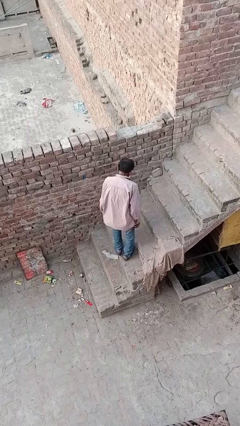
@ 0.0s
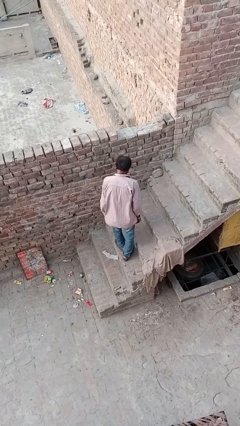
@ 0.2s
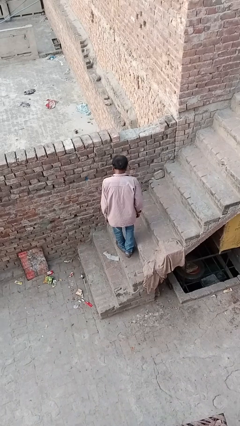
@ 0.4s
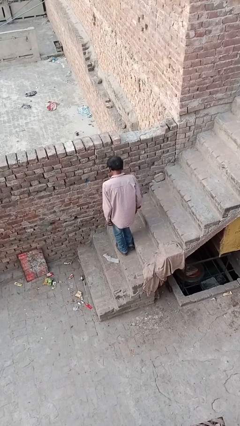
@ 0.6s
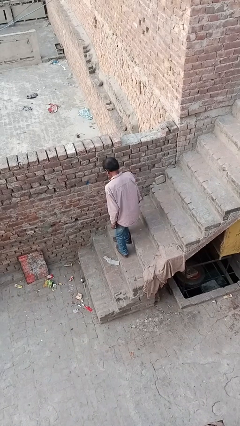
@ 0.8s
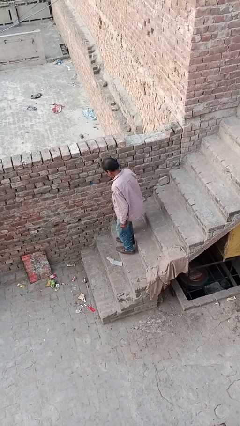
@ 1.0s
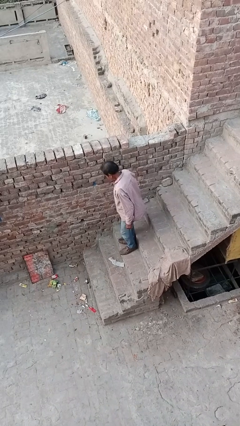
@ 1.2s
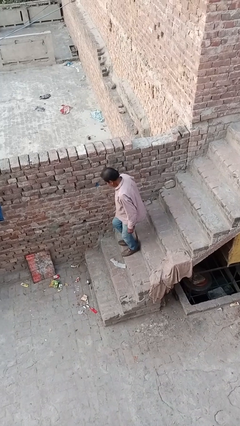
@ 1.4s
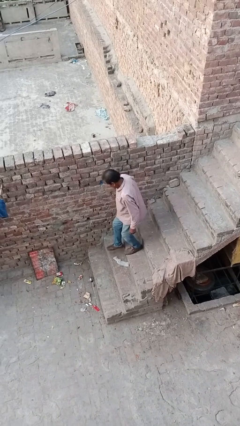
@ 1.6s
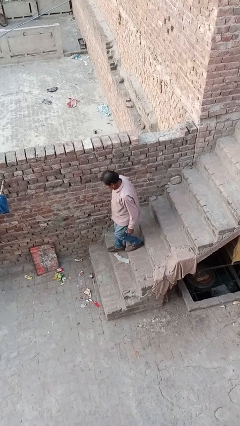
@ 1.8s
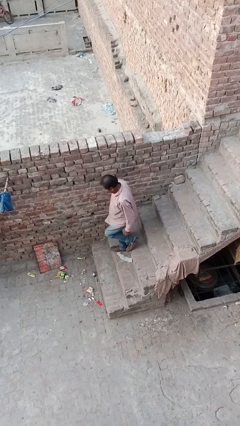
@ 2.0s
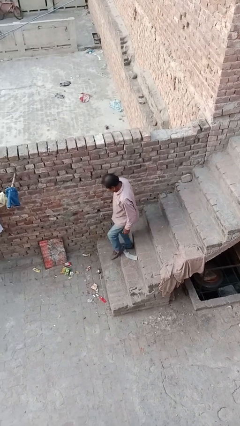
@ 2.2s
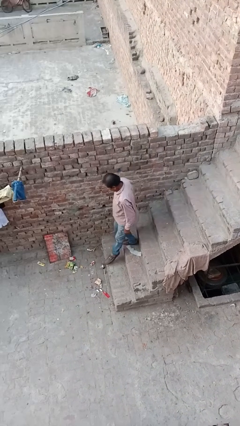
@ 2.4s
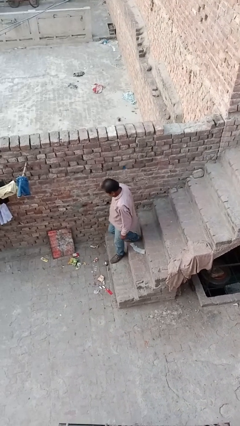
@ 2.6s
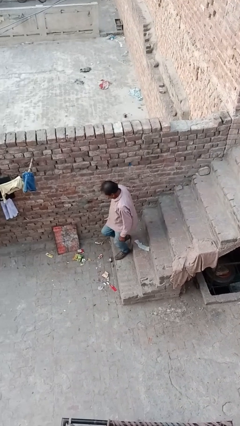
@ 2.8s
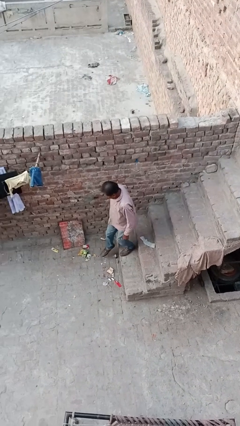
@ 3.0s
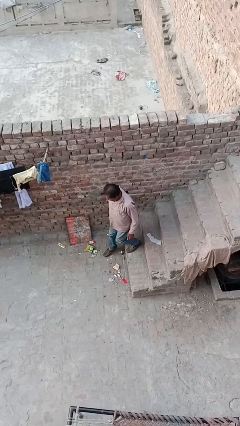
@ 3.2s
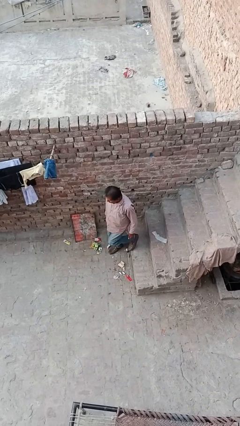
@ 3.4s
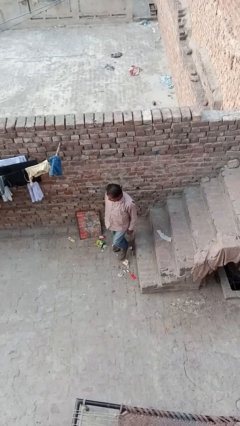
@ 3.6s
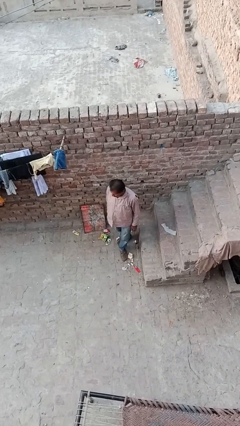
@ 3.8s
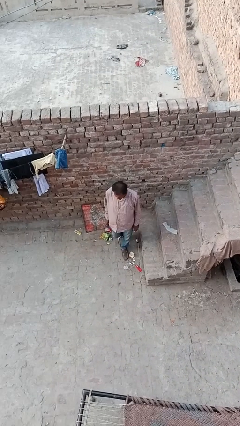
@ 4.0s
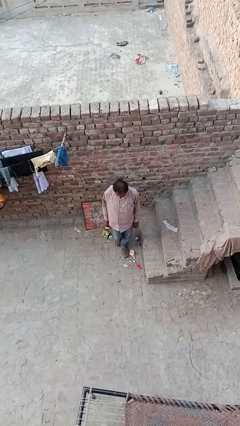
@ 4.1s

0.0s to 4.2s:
person climbs down stairs

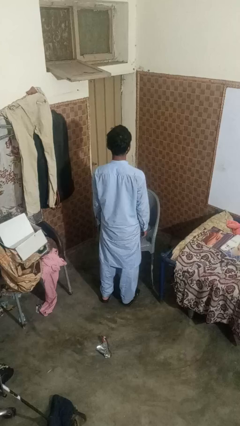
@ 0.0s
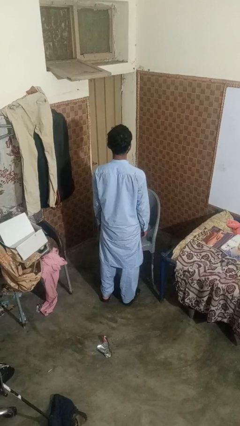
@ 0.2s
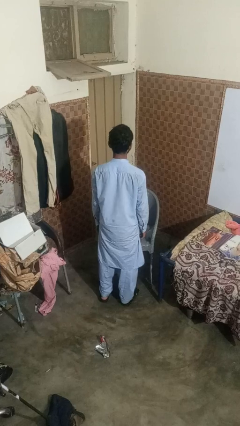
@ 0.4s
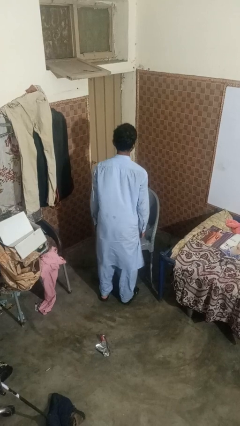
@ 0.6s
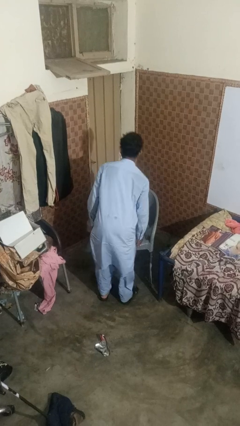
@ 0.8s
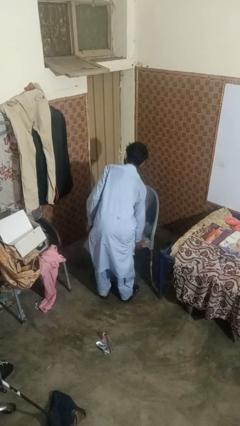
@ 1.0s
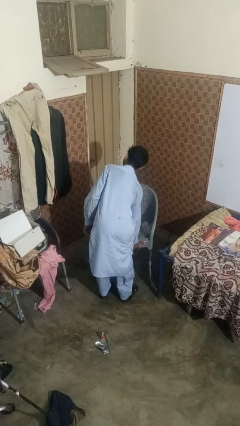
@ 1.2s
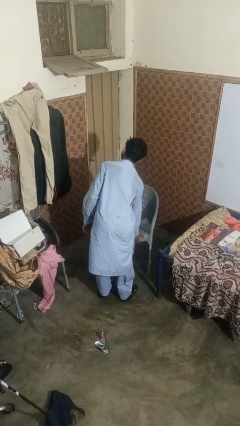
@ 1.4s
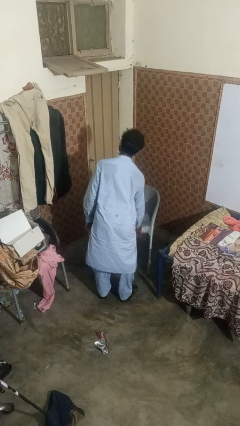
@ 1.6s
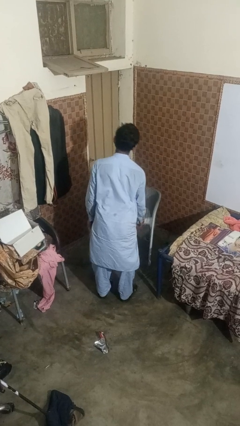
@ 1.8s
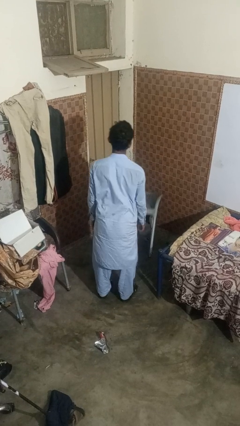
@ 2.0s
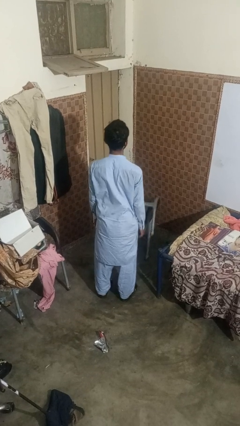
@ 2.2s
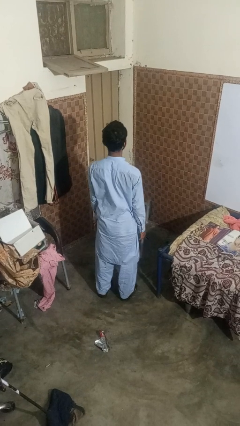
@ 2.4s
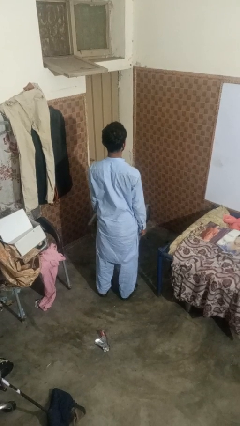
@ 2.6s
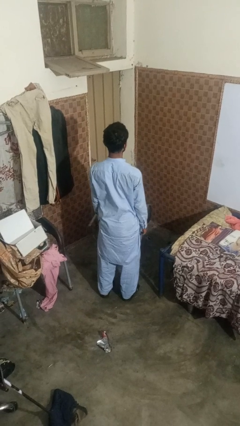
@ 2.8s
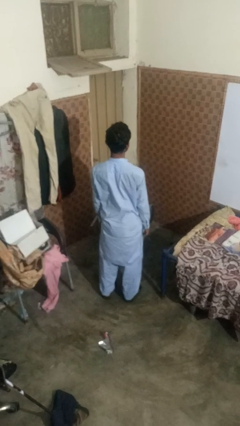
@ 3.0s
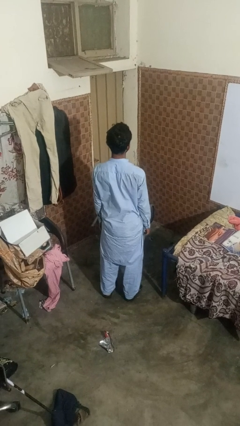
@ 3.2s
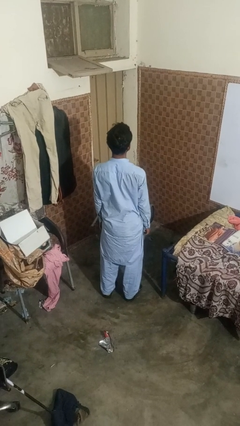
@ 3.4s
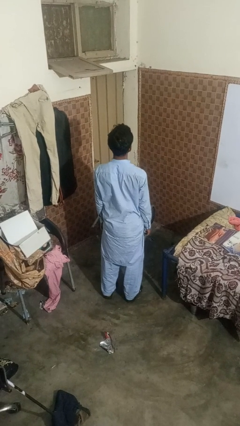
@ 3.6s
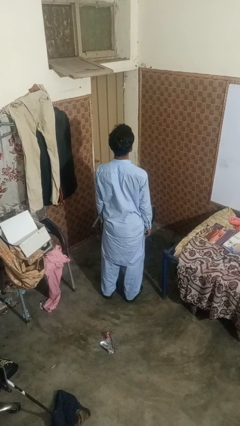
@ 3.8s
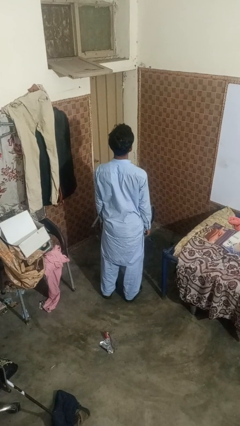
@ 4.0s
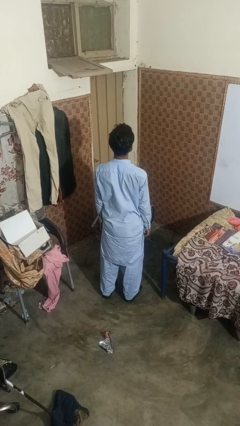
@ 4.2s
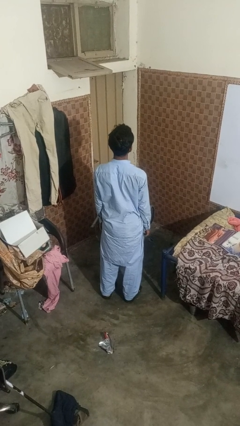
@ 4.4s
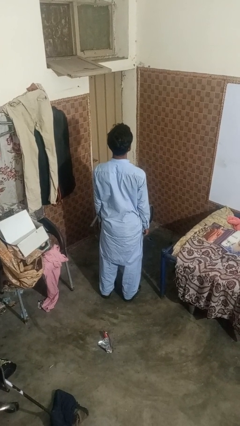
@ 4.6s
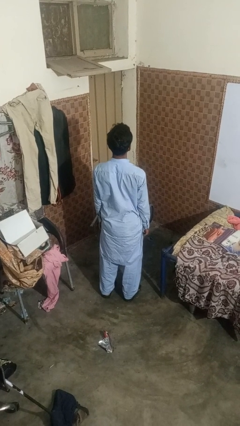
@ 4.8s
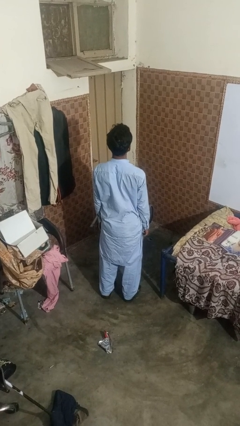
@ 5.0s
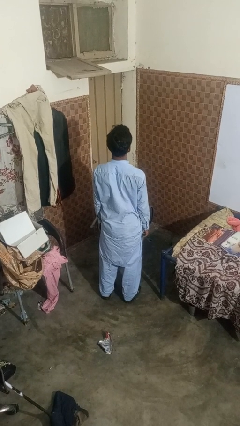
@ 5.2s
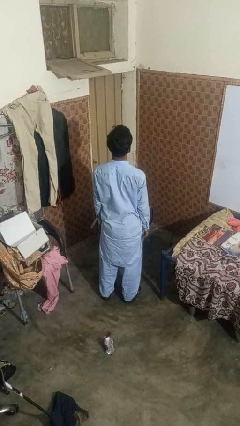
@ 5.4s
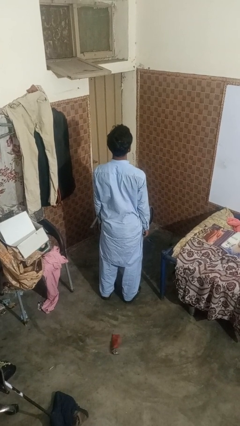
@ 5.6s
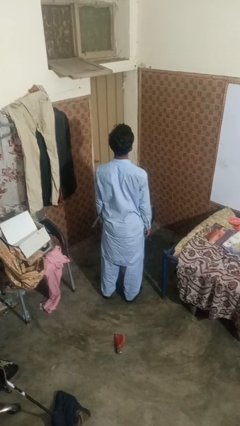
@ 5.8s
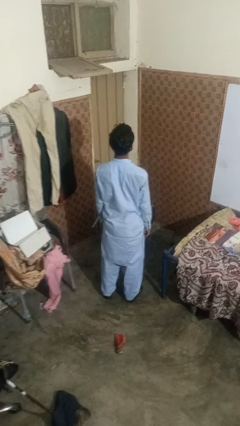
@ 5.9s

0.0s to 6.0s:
person knocks over furniture

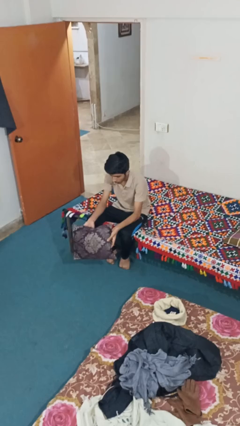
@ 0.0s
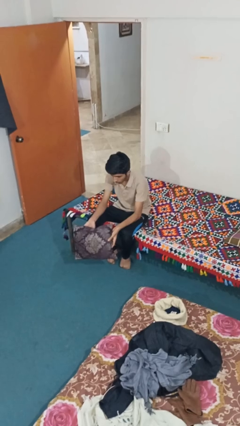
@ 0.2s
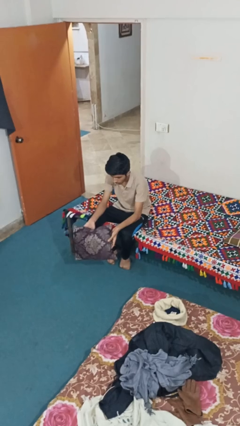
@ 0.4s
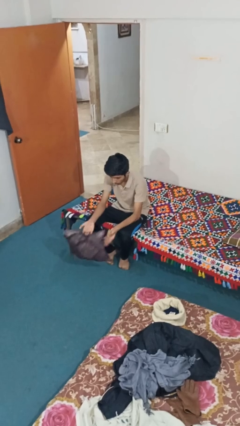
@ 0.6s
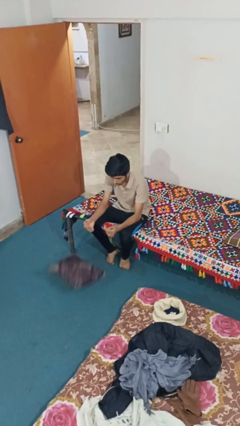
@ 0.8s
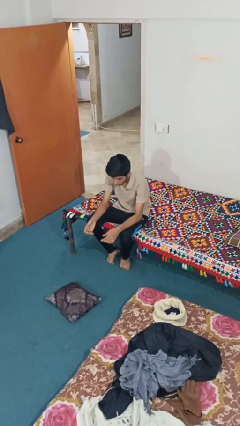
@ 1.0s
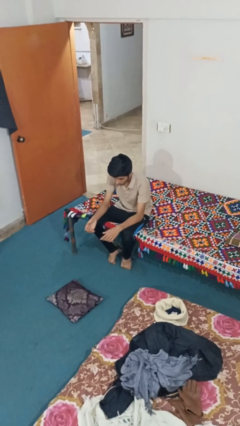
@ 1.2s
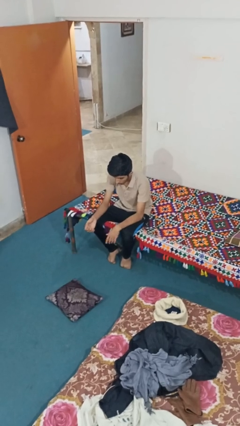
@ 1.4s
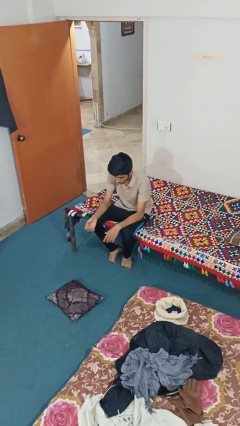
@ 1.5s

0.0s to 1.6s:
person drops object

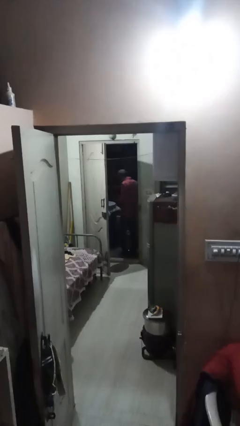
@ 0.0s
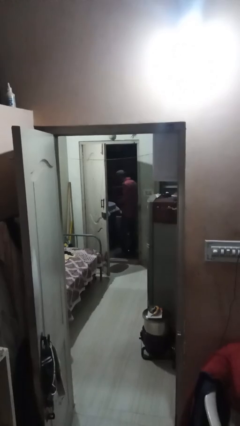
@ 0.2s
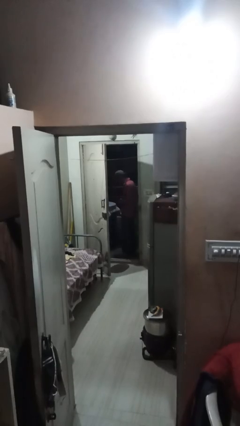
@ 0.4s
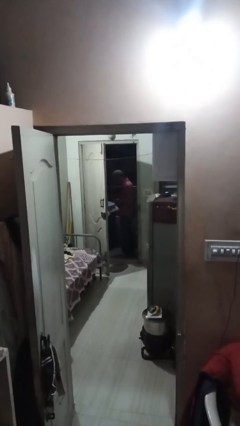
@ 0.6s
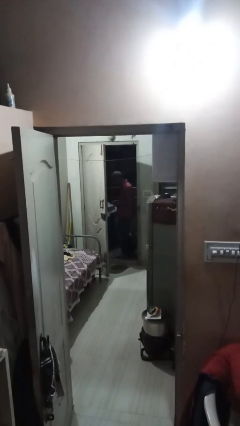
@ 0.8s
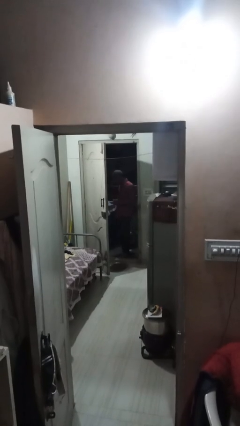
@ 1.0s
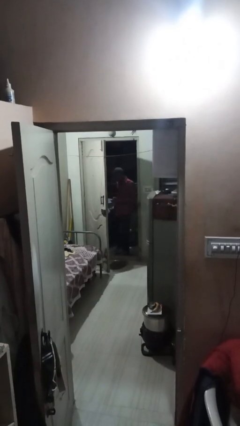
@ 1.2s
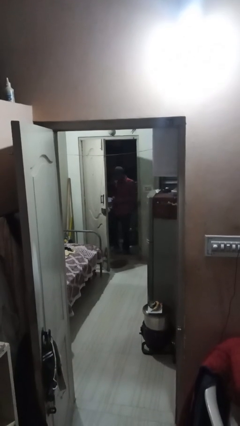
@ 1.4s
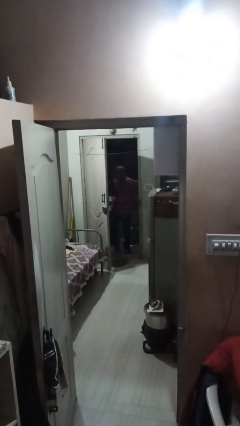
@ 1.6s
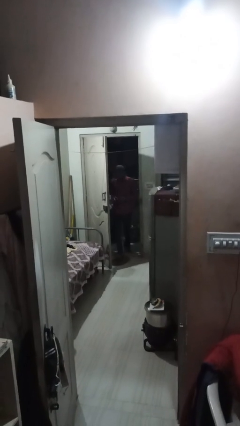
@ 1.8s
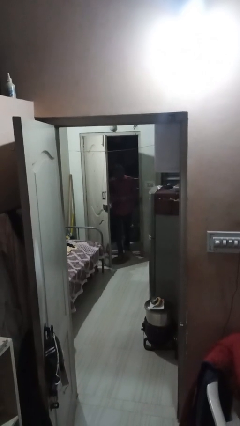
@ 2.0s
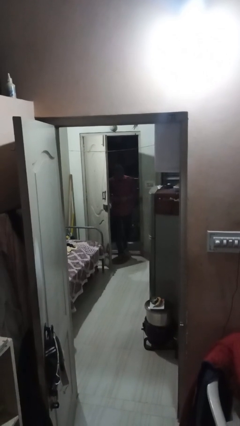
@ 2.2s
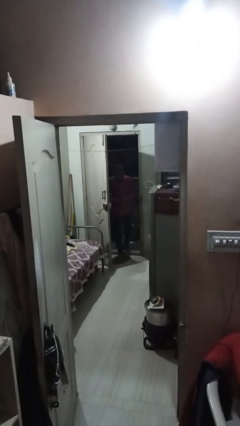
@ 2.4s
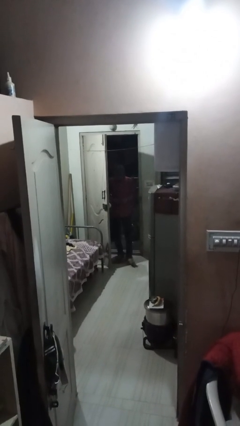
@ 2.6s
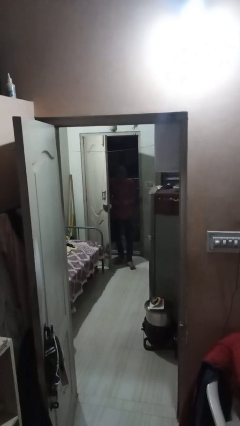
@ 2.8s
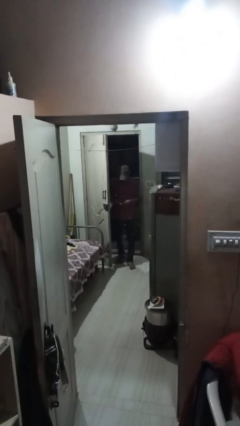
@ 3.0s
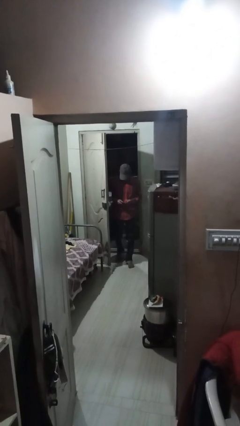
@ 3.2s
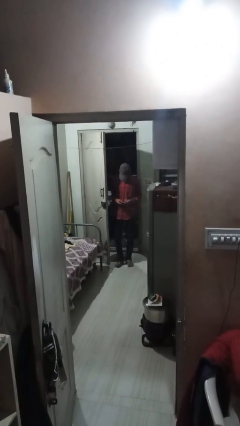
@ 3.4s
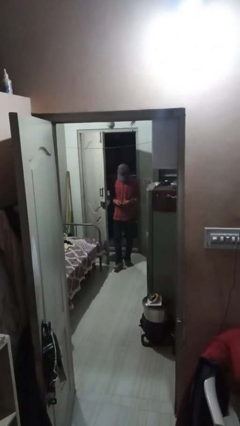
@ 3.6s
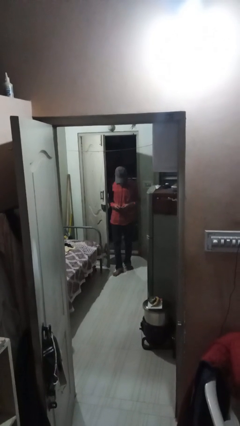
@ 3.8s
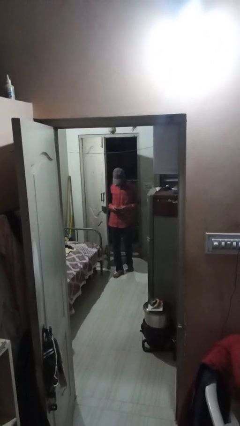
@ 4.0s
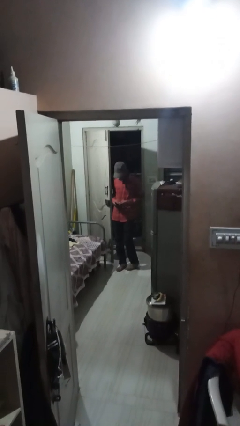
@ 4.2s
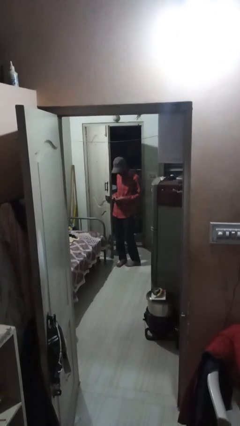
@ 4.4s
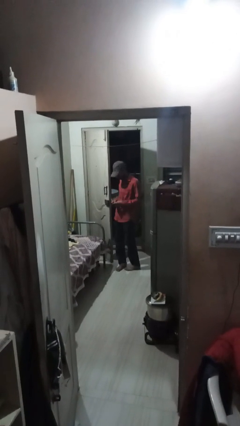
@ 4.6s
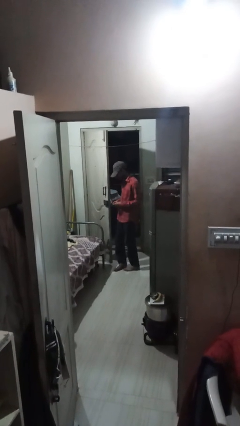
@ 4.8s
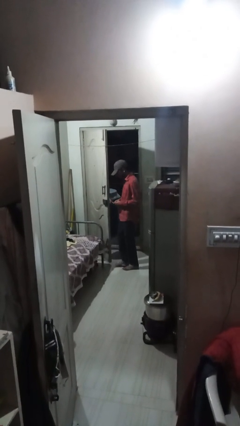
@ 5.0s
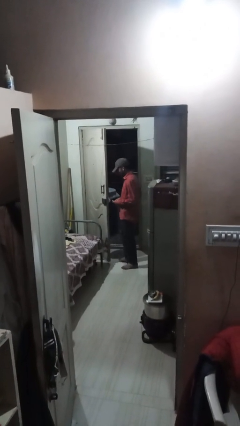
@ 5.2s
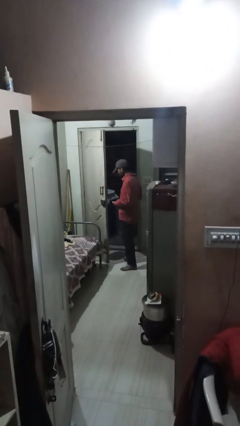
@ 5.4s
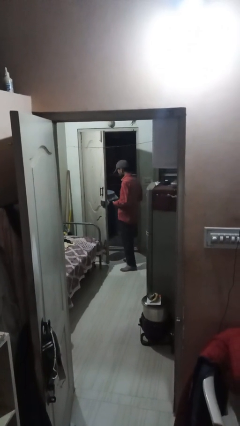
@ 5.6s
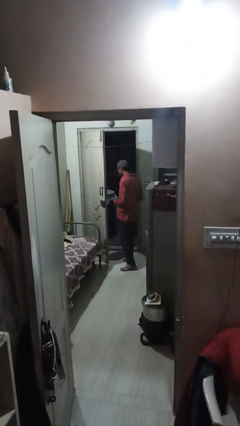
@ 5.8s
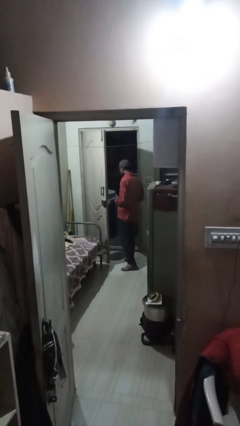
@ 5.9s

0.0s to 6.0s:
person enters scene through structure
